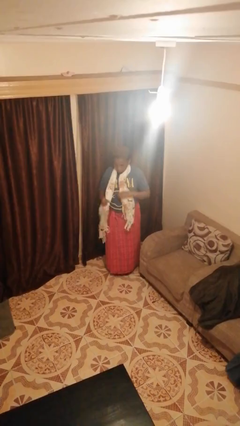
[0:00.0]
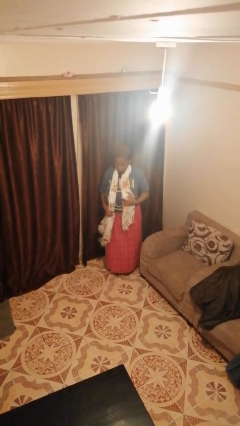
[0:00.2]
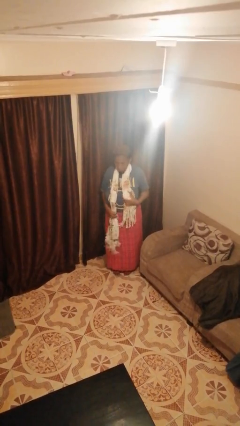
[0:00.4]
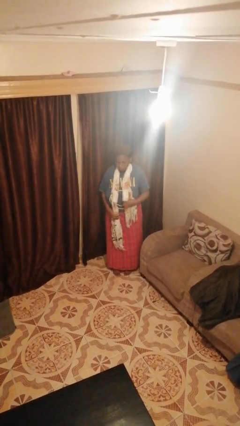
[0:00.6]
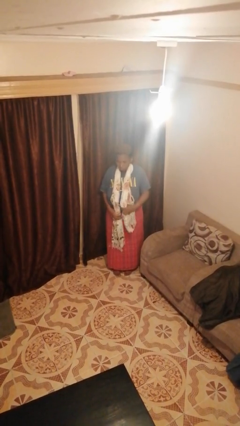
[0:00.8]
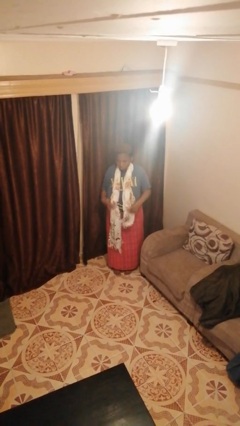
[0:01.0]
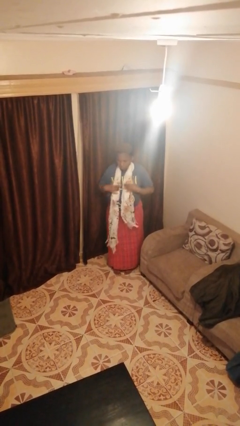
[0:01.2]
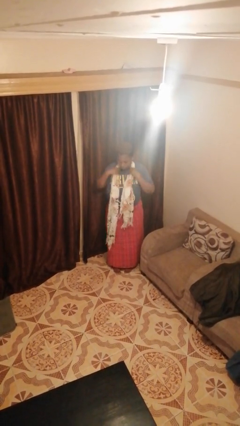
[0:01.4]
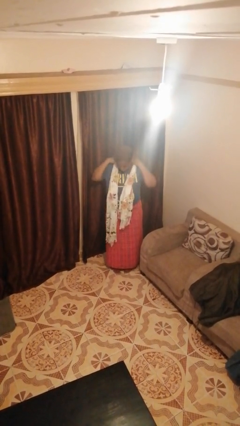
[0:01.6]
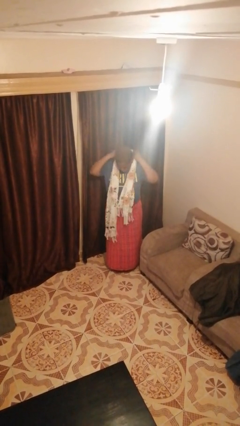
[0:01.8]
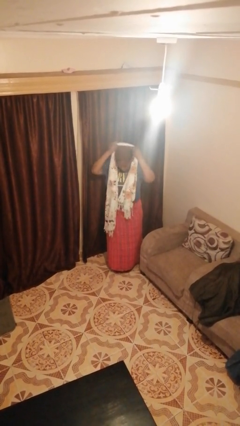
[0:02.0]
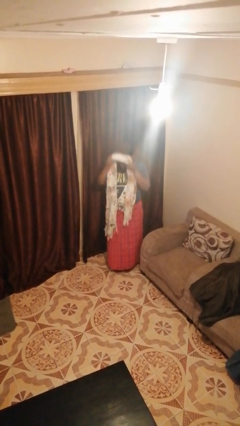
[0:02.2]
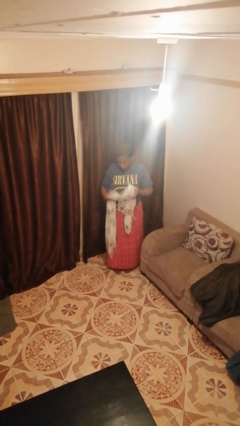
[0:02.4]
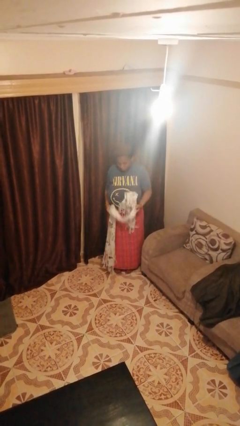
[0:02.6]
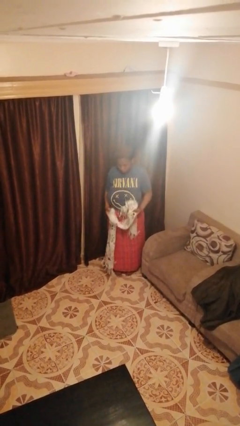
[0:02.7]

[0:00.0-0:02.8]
person takes off scarf

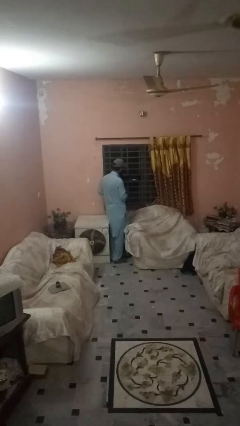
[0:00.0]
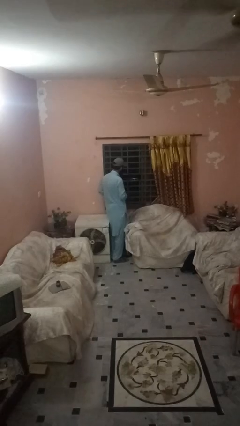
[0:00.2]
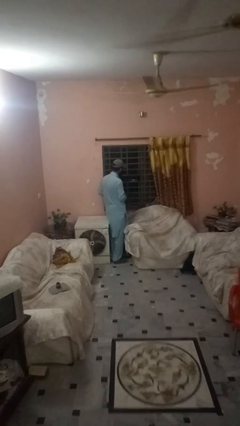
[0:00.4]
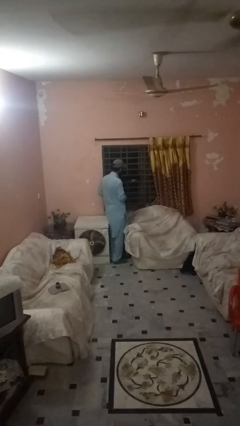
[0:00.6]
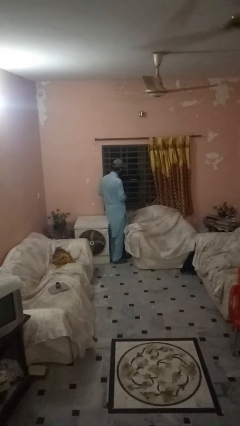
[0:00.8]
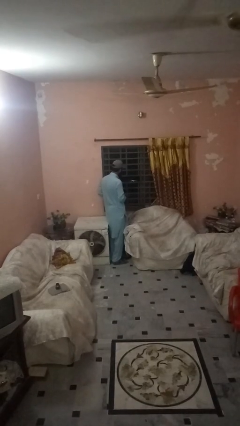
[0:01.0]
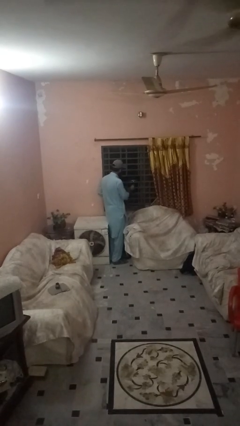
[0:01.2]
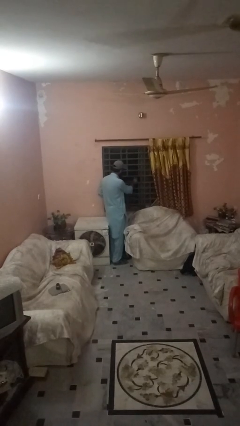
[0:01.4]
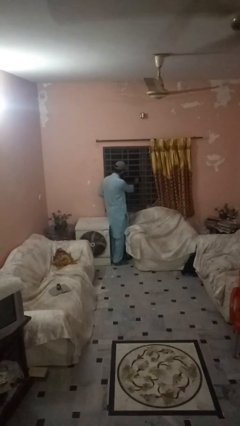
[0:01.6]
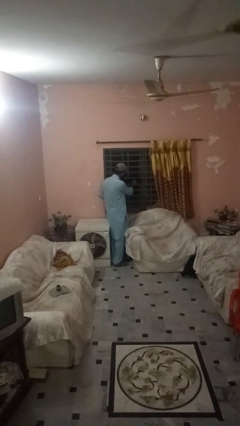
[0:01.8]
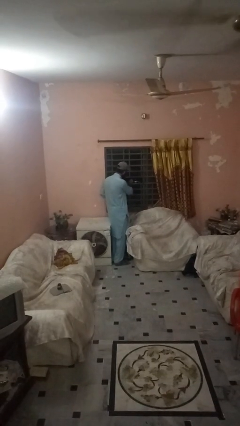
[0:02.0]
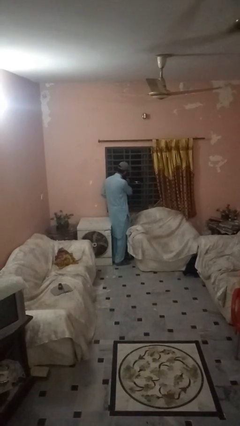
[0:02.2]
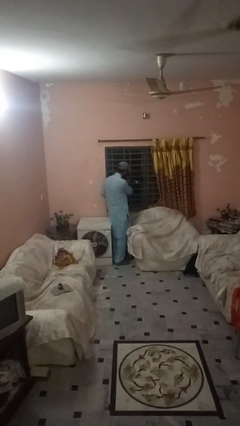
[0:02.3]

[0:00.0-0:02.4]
person washes window

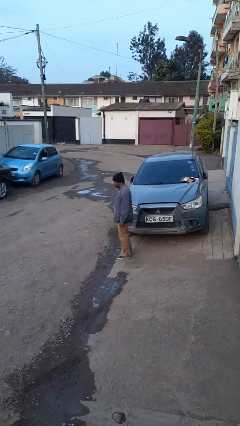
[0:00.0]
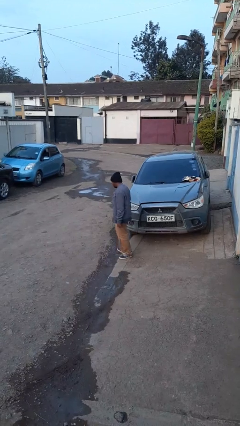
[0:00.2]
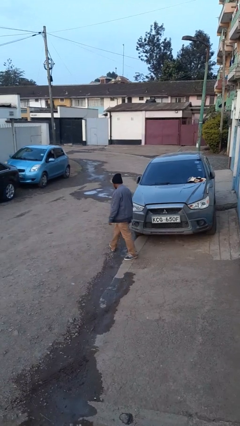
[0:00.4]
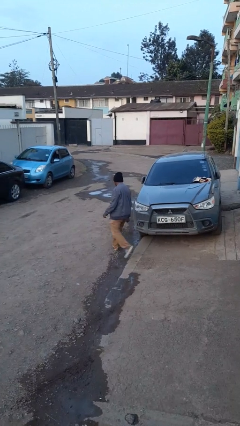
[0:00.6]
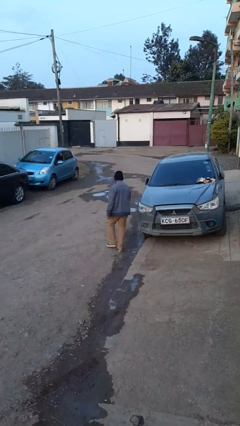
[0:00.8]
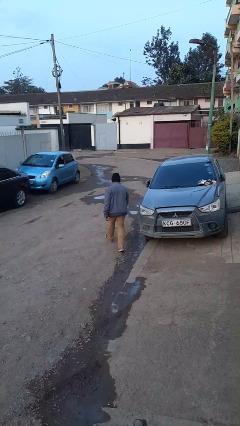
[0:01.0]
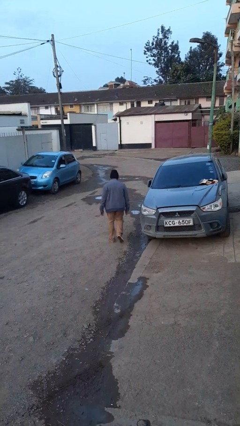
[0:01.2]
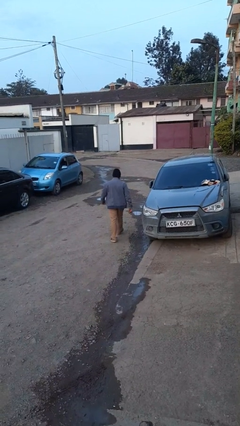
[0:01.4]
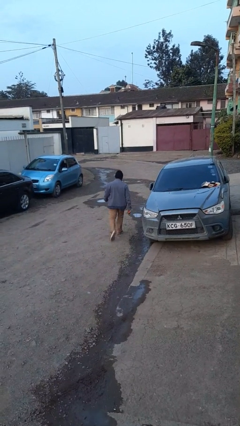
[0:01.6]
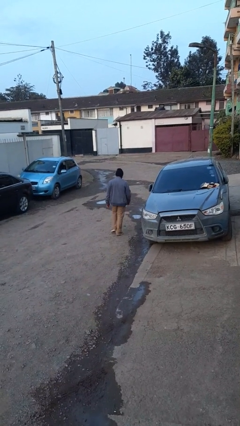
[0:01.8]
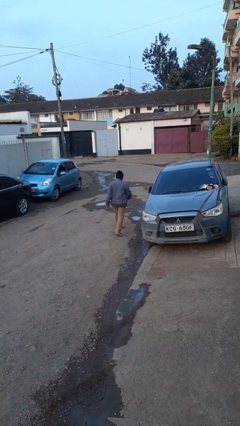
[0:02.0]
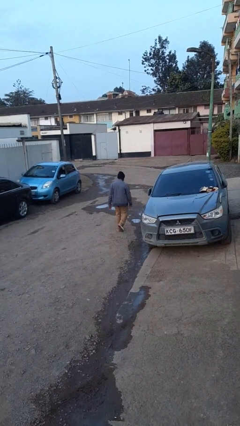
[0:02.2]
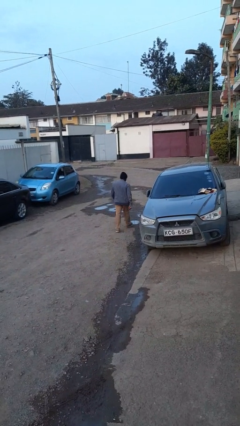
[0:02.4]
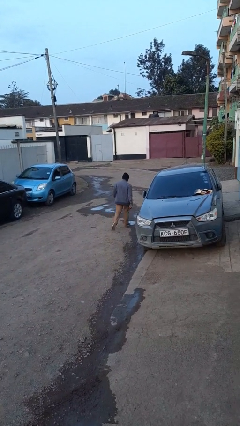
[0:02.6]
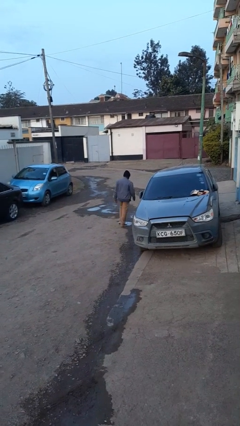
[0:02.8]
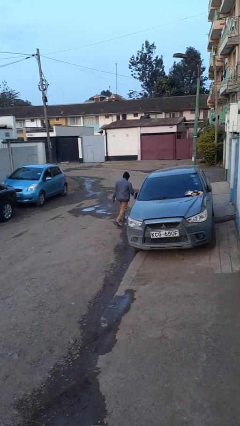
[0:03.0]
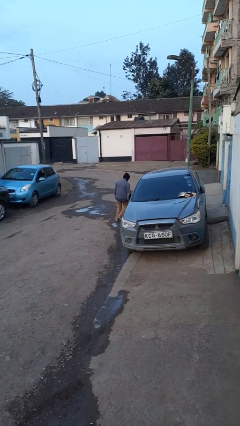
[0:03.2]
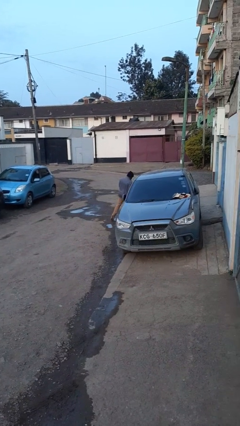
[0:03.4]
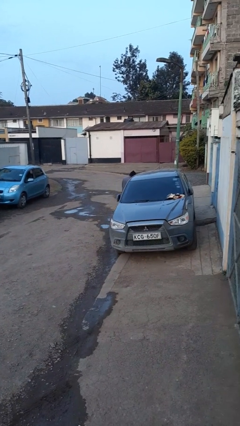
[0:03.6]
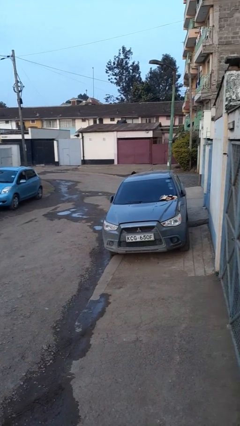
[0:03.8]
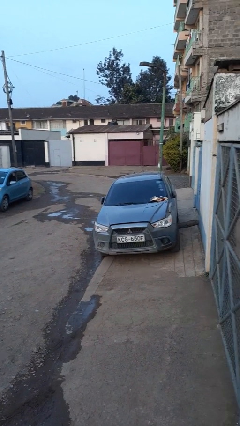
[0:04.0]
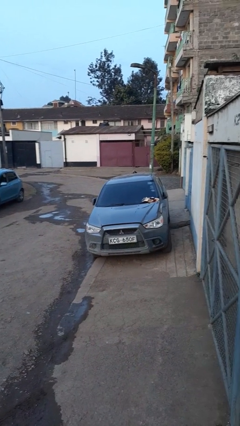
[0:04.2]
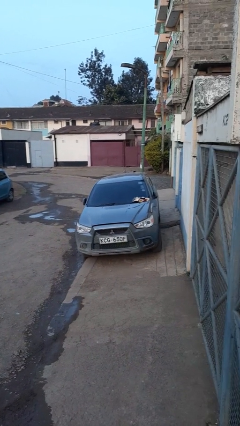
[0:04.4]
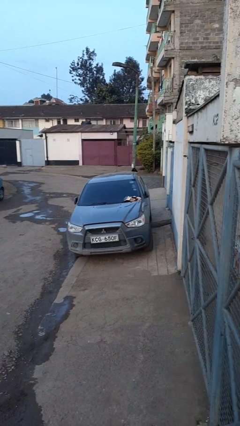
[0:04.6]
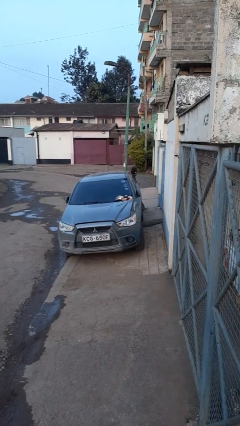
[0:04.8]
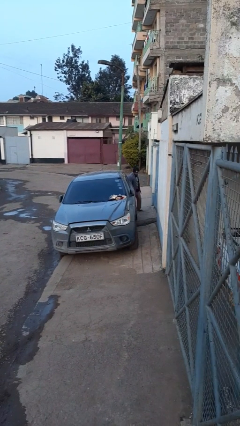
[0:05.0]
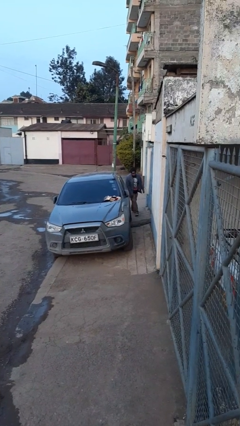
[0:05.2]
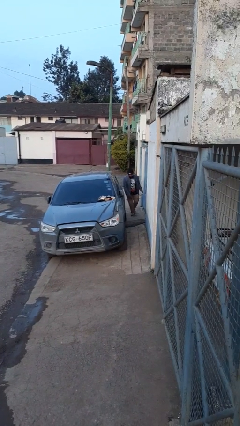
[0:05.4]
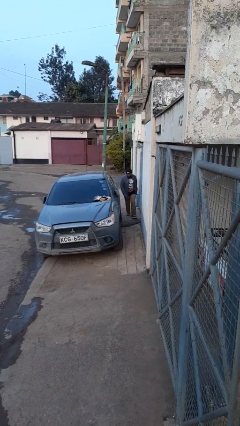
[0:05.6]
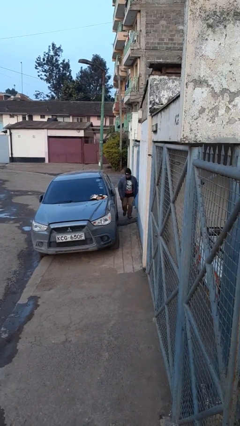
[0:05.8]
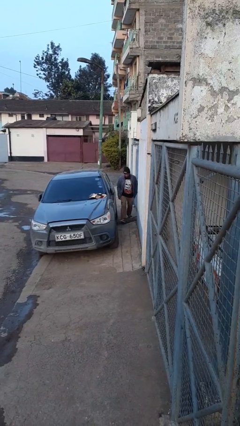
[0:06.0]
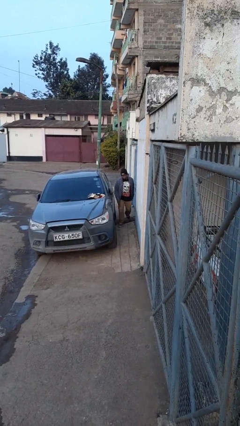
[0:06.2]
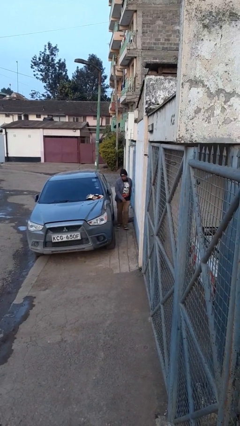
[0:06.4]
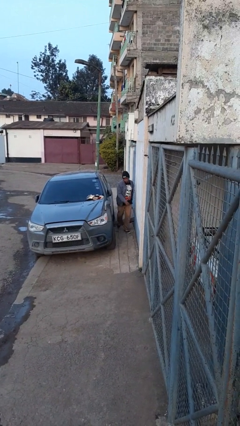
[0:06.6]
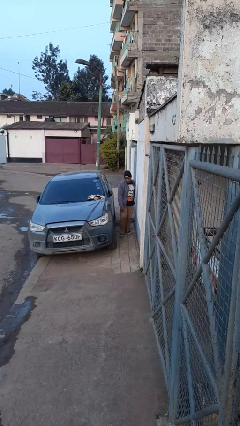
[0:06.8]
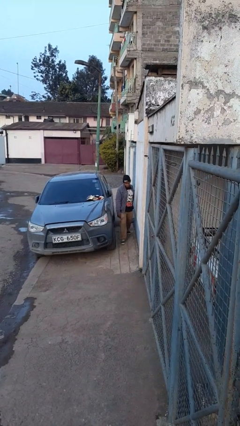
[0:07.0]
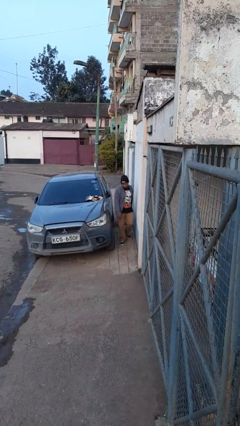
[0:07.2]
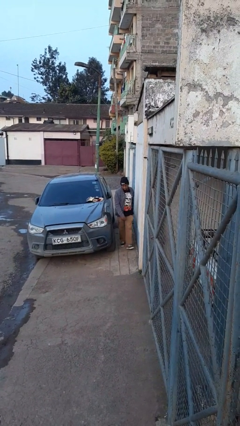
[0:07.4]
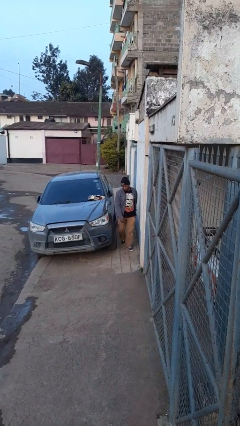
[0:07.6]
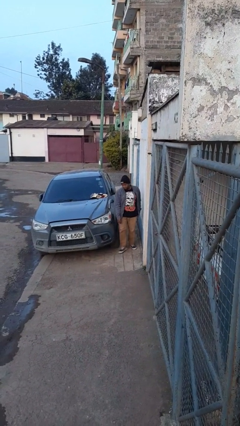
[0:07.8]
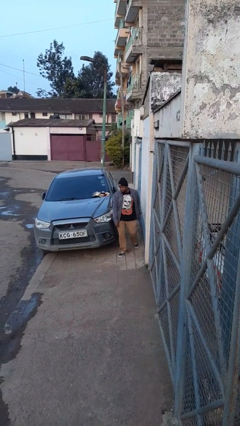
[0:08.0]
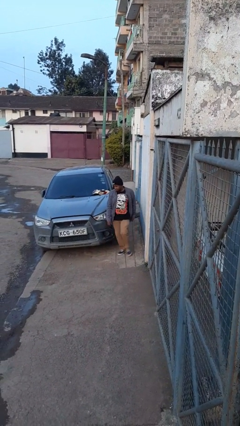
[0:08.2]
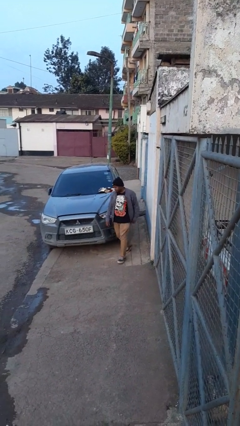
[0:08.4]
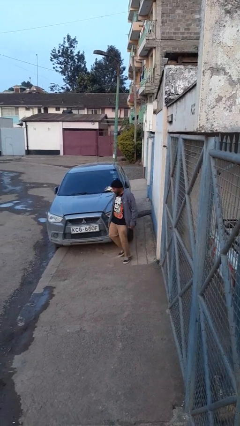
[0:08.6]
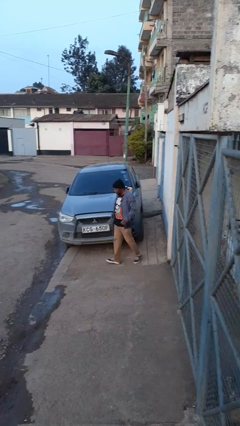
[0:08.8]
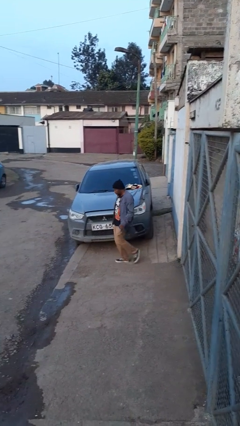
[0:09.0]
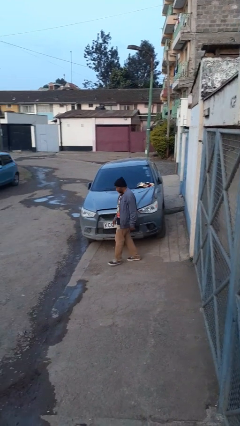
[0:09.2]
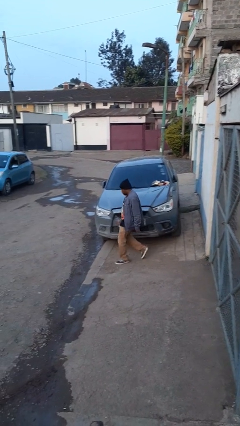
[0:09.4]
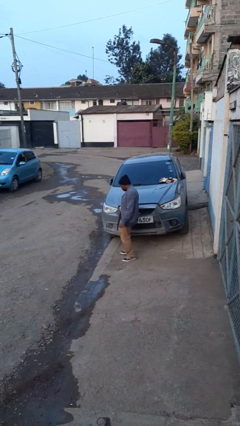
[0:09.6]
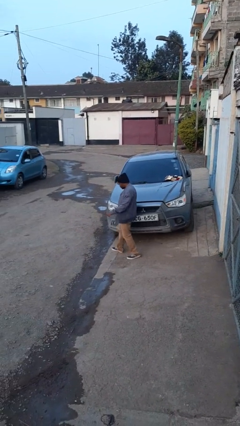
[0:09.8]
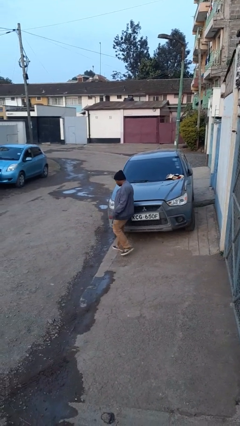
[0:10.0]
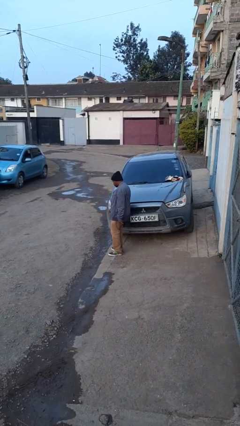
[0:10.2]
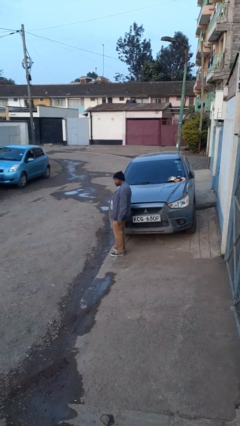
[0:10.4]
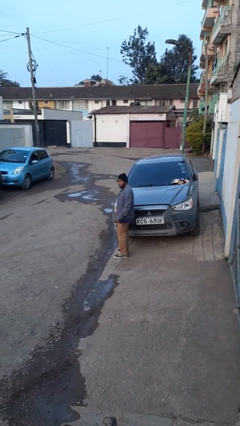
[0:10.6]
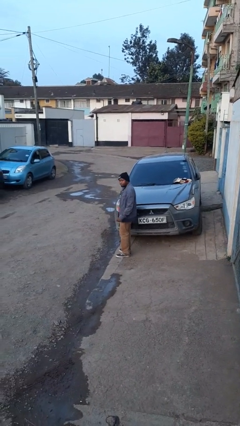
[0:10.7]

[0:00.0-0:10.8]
person walks around car

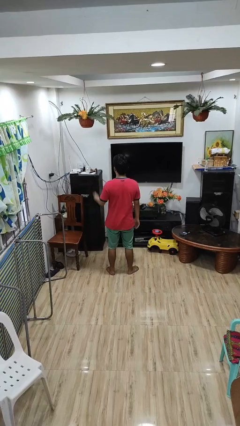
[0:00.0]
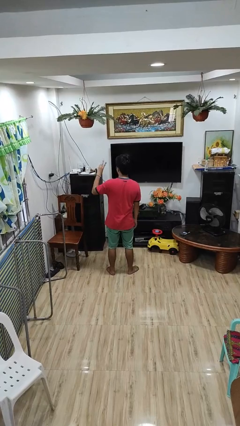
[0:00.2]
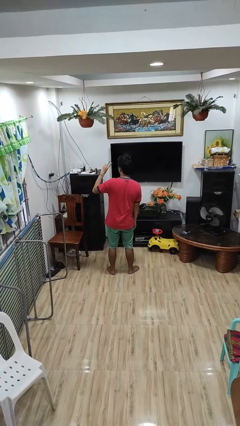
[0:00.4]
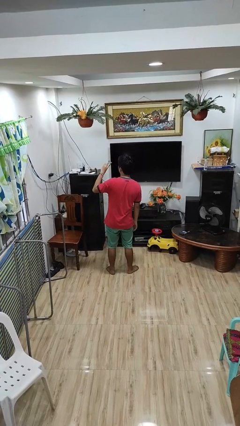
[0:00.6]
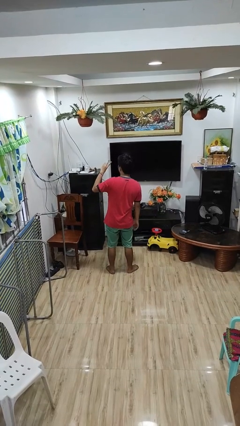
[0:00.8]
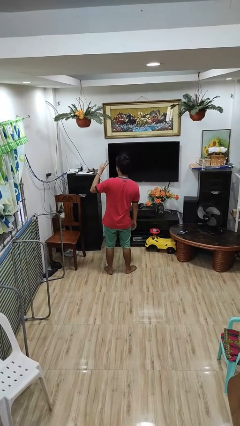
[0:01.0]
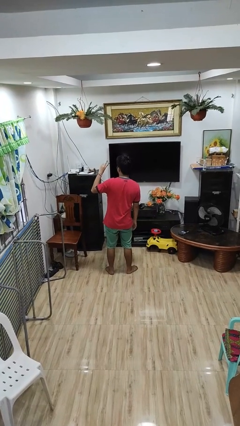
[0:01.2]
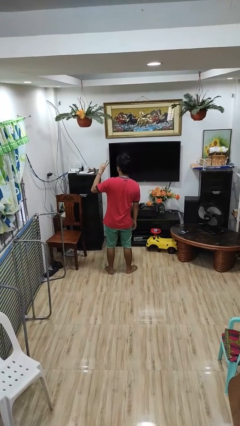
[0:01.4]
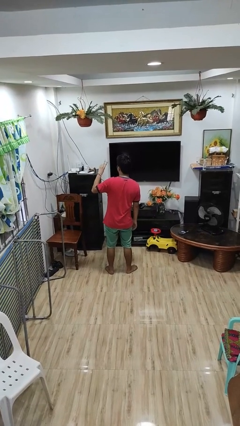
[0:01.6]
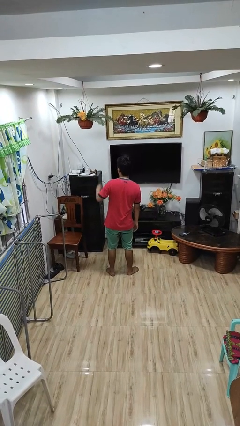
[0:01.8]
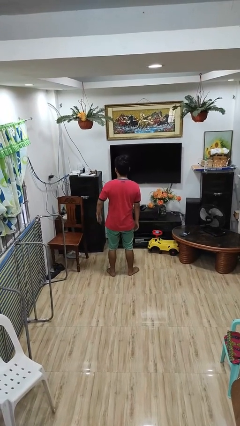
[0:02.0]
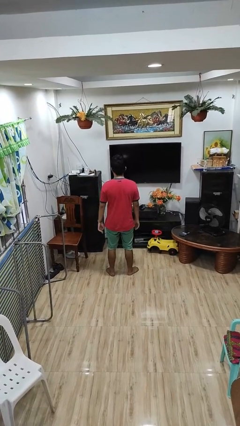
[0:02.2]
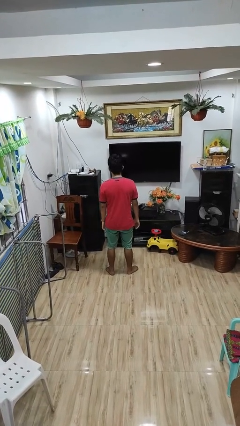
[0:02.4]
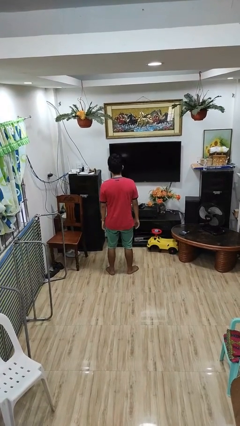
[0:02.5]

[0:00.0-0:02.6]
person gestures peace
